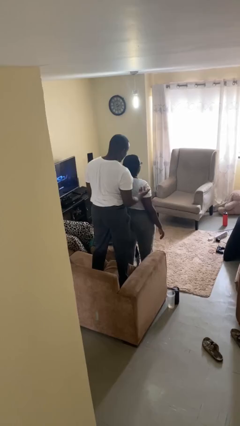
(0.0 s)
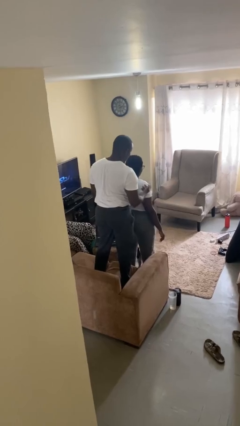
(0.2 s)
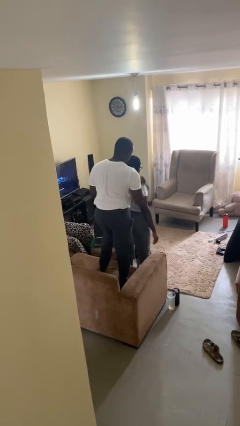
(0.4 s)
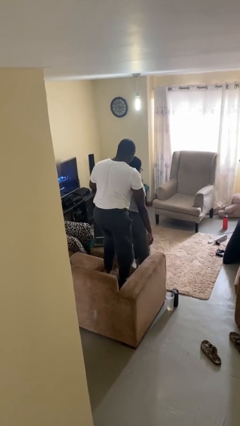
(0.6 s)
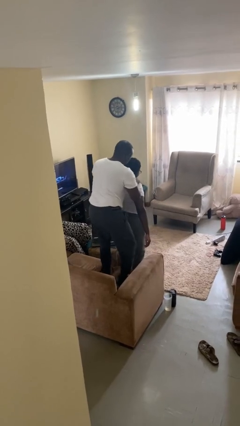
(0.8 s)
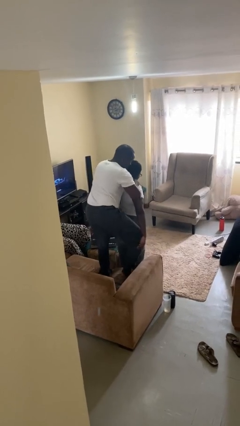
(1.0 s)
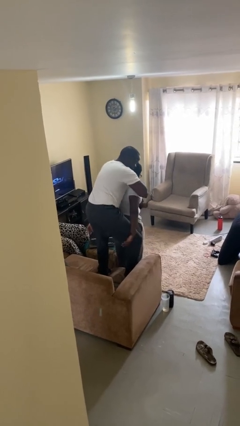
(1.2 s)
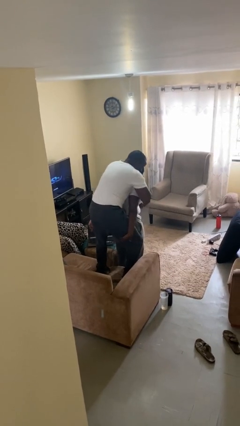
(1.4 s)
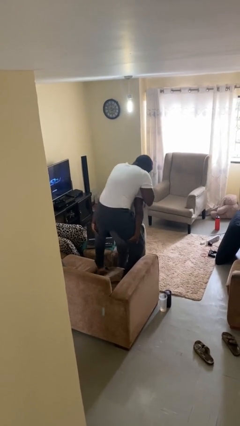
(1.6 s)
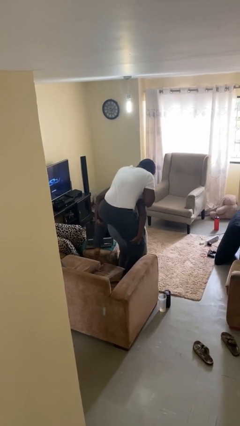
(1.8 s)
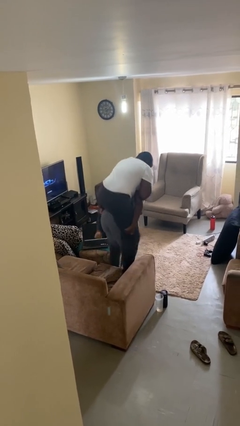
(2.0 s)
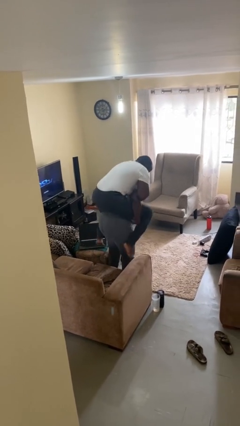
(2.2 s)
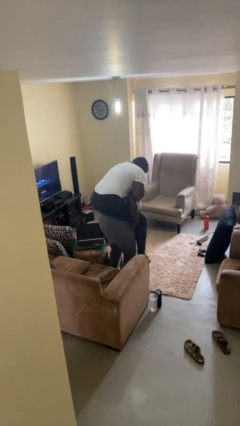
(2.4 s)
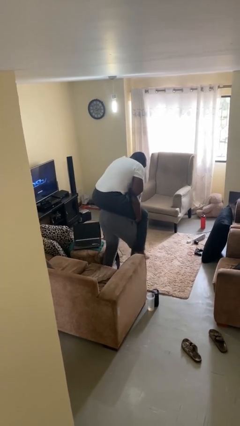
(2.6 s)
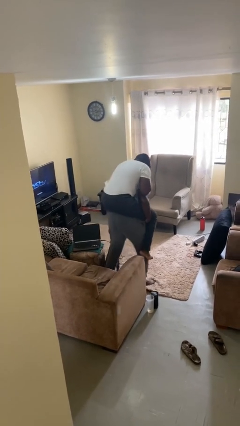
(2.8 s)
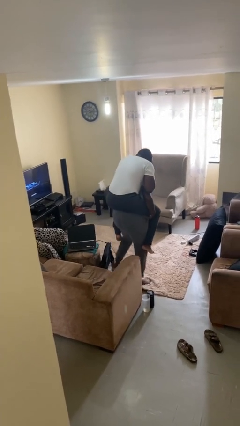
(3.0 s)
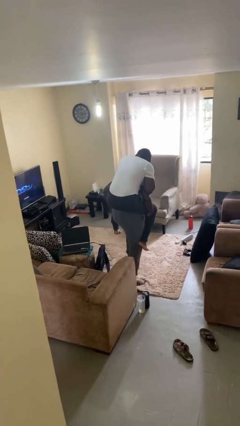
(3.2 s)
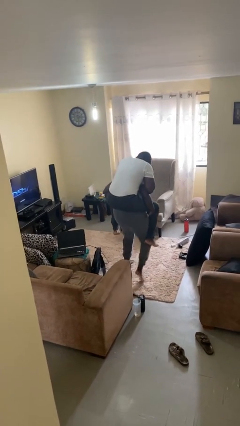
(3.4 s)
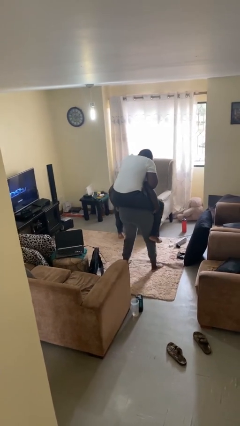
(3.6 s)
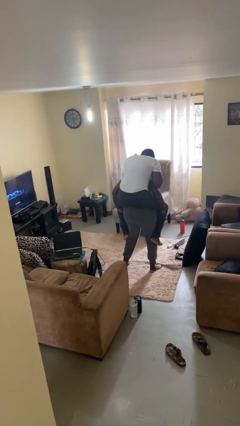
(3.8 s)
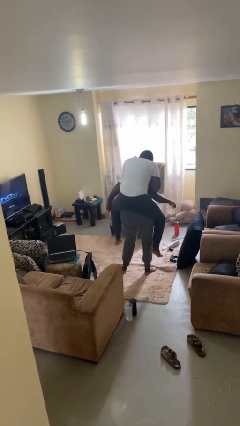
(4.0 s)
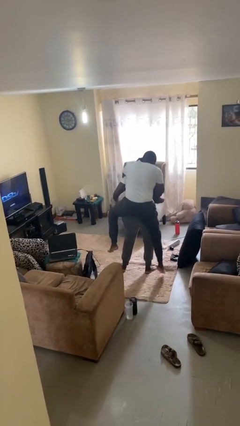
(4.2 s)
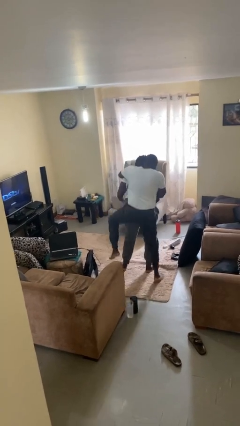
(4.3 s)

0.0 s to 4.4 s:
person carries person on back

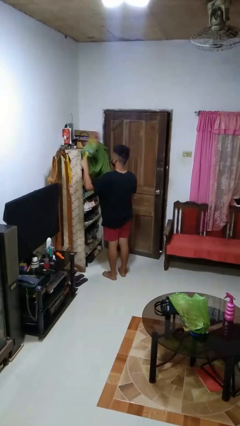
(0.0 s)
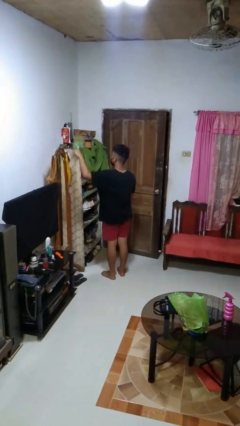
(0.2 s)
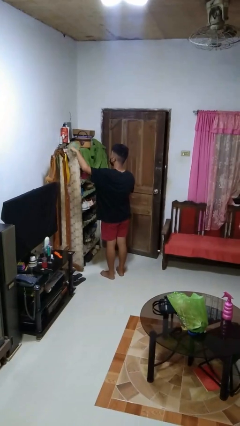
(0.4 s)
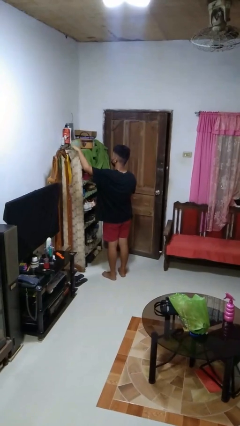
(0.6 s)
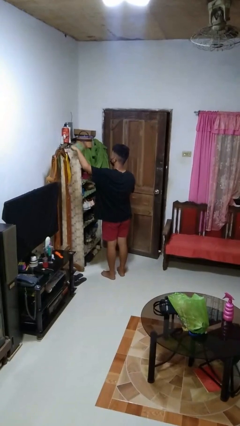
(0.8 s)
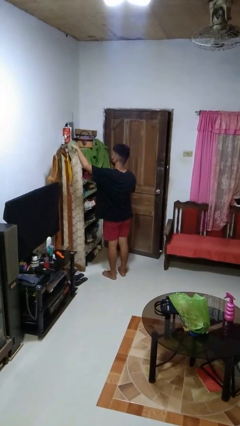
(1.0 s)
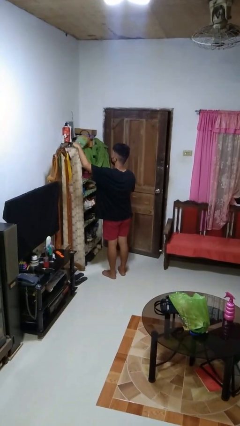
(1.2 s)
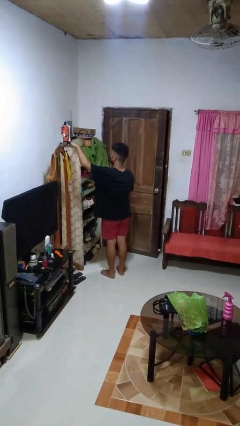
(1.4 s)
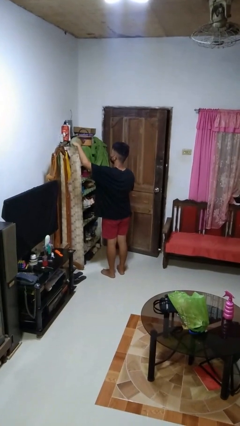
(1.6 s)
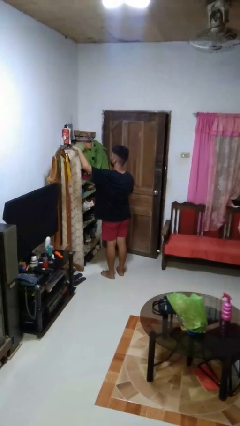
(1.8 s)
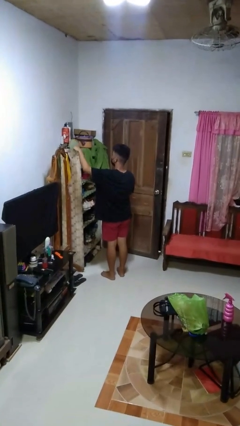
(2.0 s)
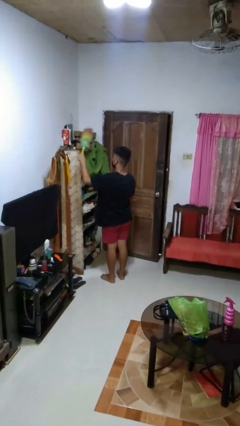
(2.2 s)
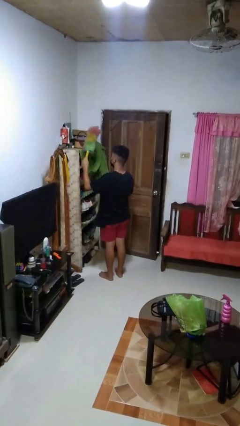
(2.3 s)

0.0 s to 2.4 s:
person dusts furniture

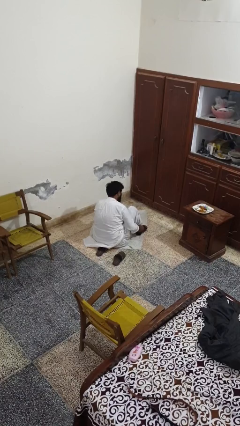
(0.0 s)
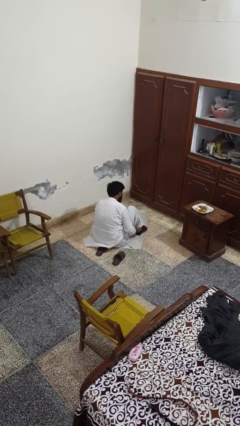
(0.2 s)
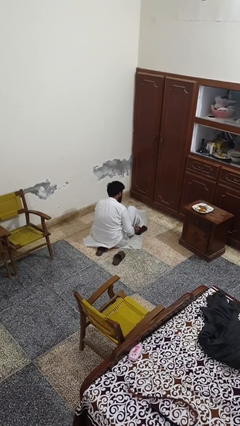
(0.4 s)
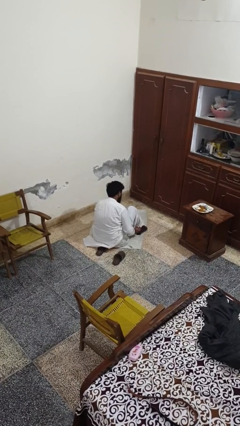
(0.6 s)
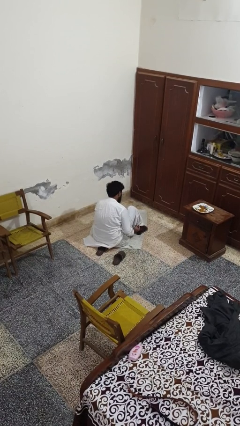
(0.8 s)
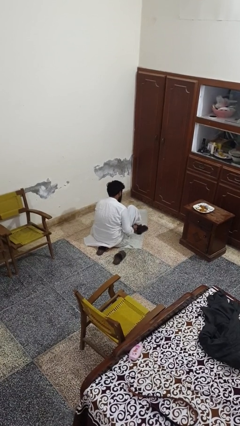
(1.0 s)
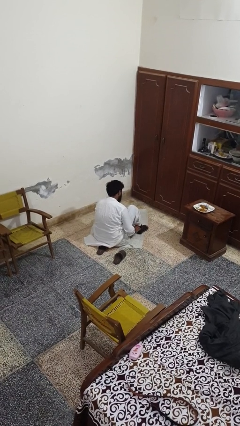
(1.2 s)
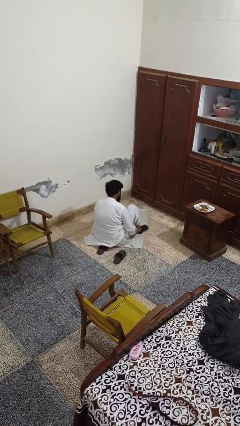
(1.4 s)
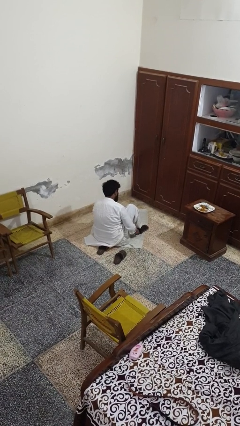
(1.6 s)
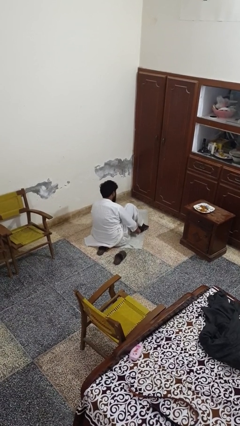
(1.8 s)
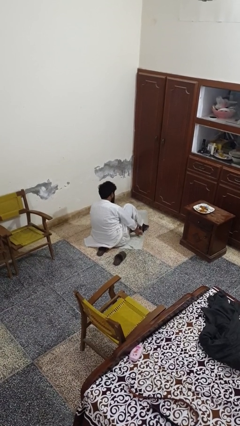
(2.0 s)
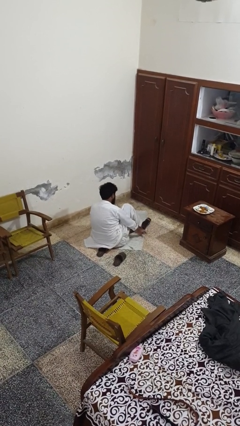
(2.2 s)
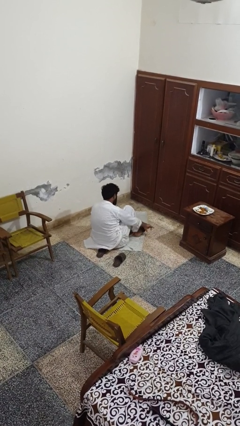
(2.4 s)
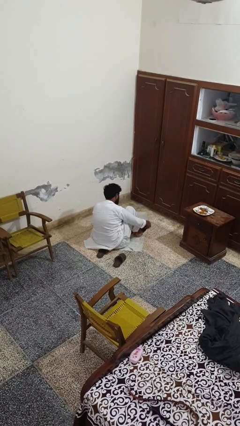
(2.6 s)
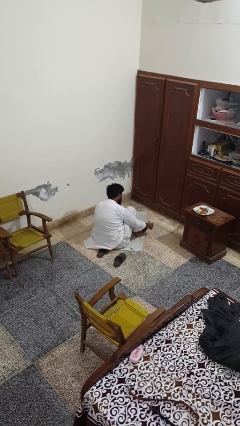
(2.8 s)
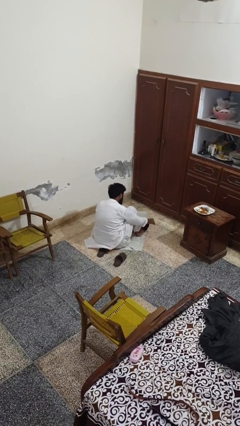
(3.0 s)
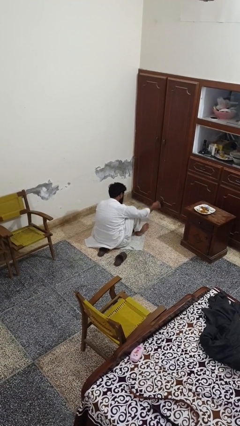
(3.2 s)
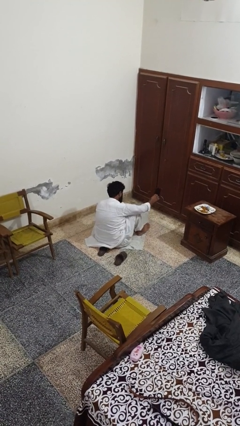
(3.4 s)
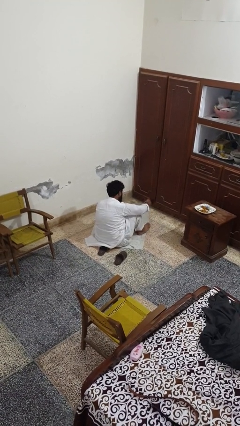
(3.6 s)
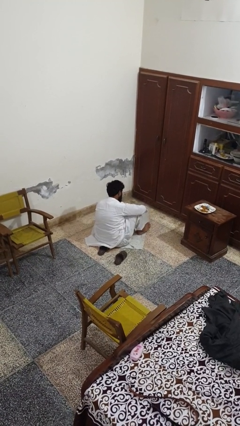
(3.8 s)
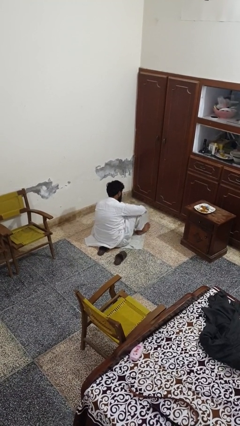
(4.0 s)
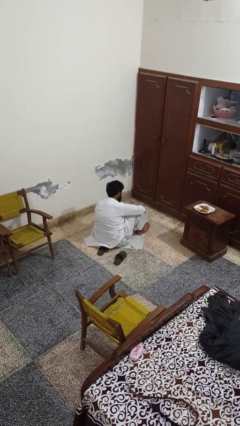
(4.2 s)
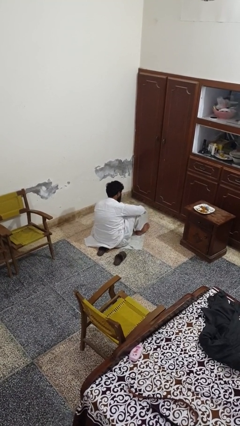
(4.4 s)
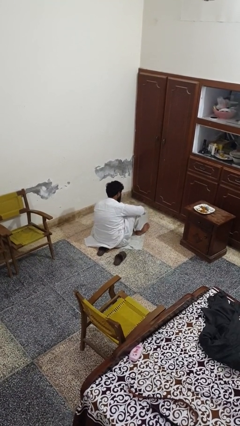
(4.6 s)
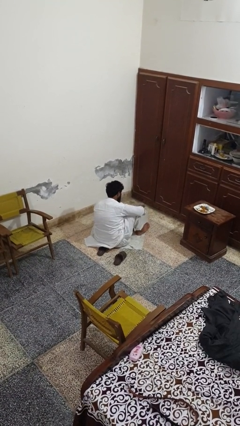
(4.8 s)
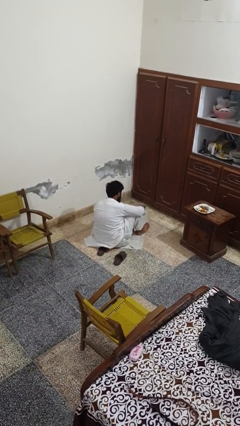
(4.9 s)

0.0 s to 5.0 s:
person takes off socks

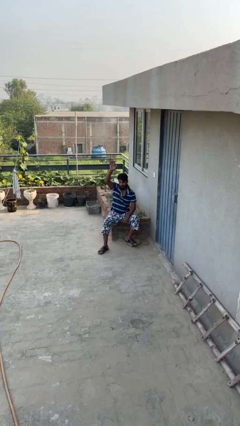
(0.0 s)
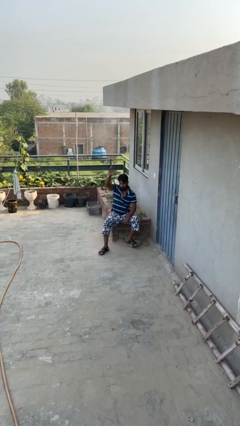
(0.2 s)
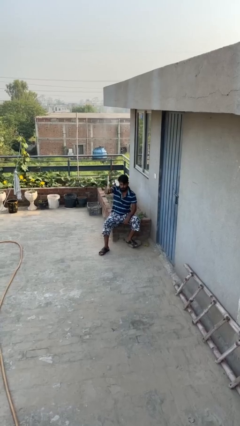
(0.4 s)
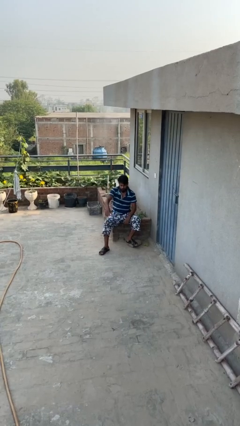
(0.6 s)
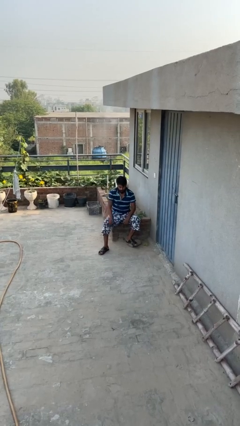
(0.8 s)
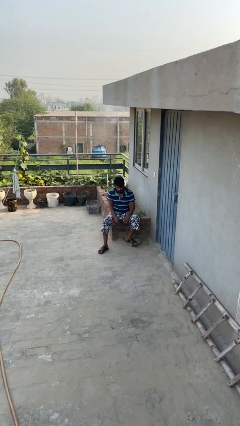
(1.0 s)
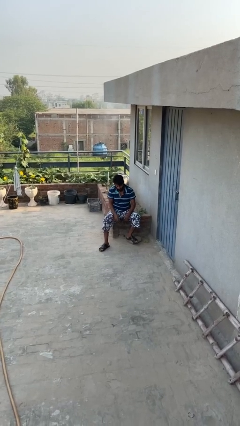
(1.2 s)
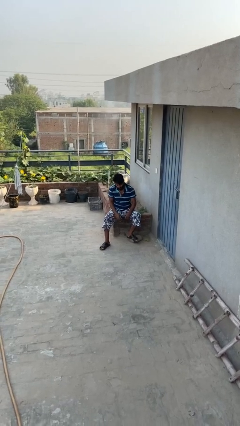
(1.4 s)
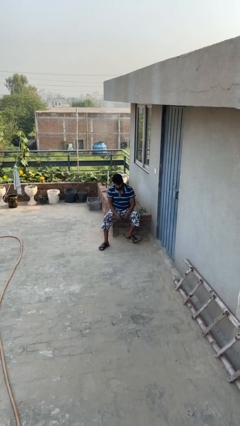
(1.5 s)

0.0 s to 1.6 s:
person gestures lower hand

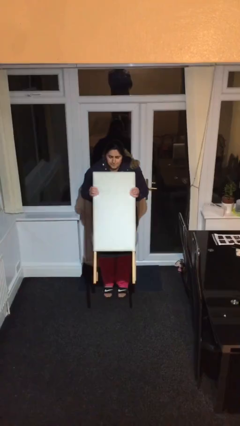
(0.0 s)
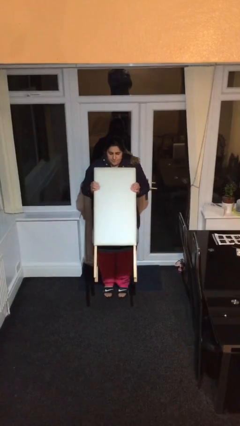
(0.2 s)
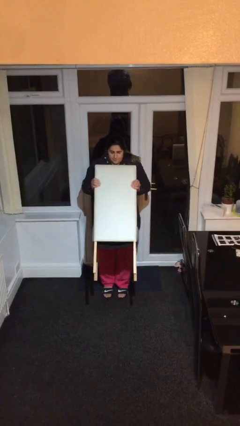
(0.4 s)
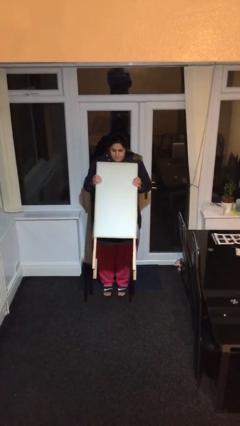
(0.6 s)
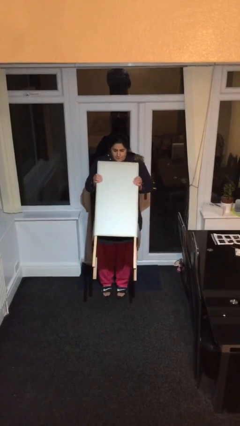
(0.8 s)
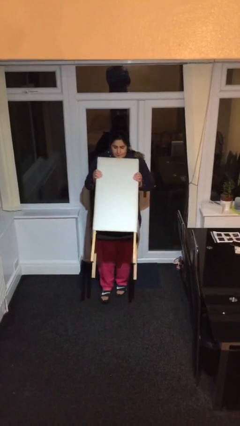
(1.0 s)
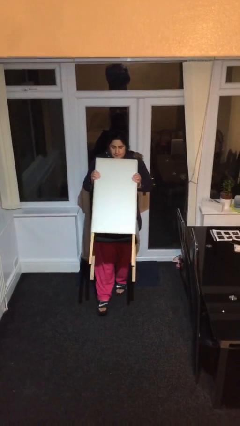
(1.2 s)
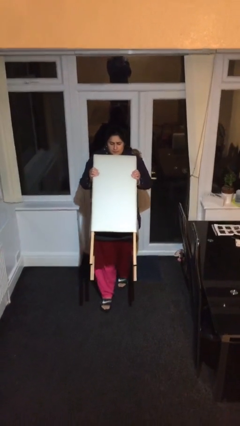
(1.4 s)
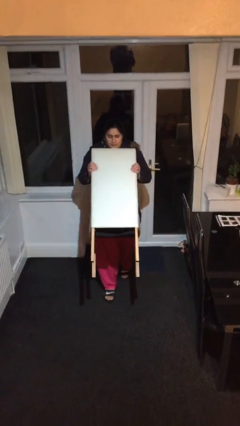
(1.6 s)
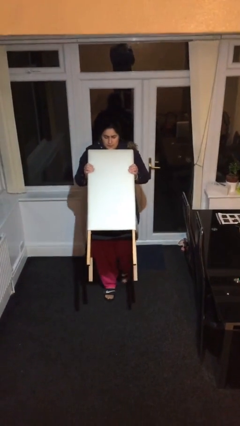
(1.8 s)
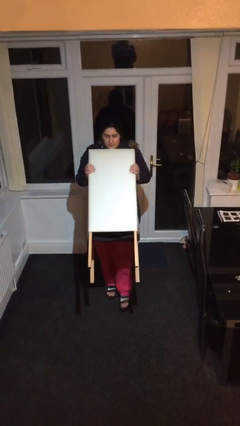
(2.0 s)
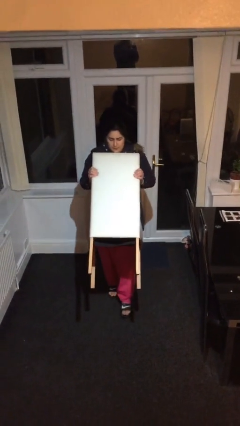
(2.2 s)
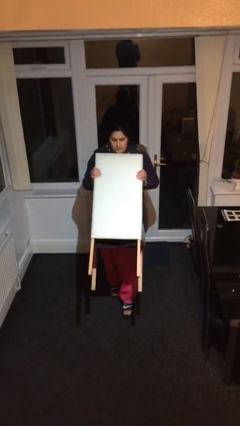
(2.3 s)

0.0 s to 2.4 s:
person carries heavy object

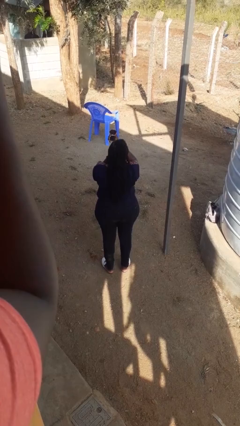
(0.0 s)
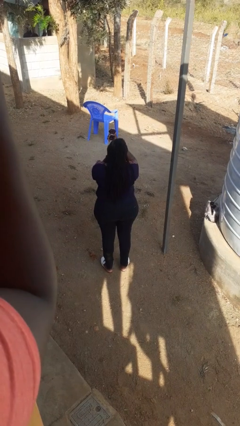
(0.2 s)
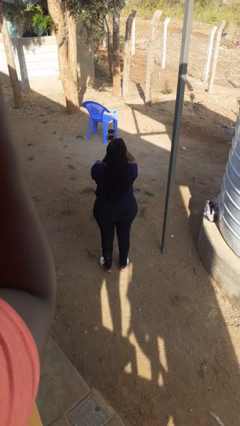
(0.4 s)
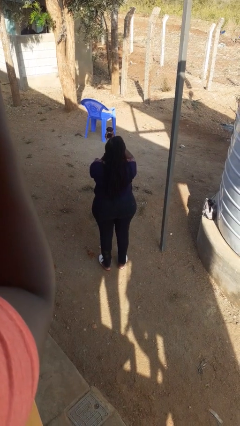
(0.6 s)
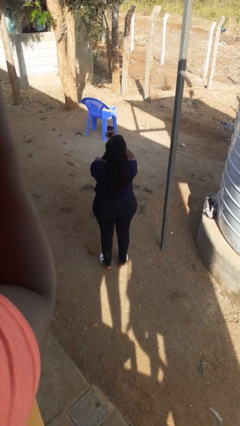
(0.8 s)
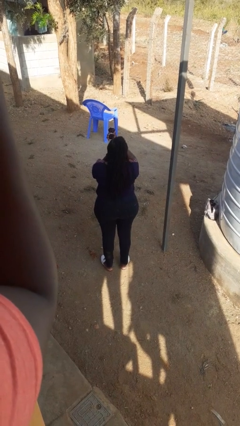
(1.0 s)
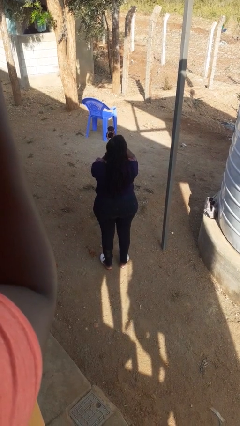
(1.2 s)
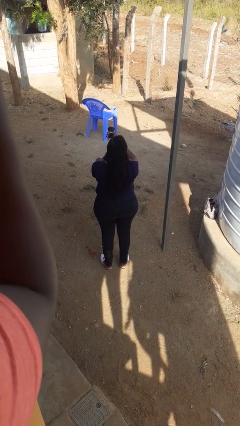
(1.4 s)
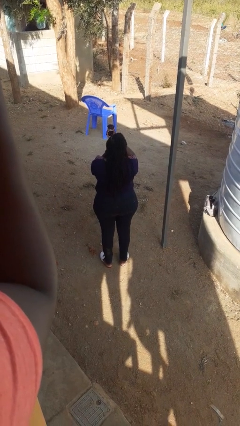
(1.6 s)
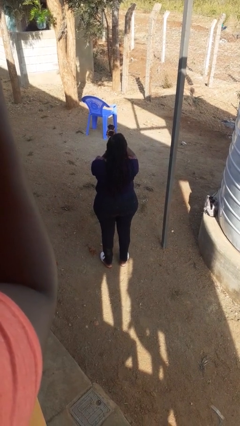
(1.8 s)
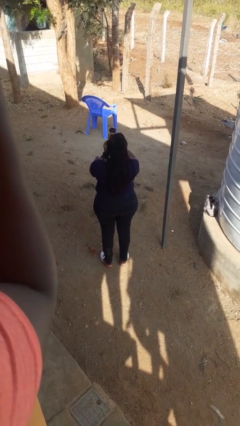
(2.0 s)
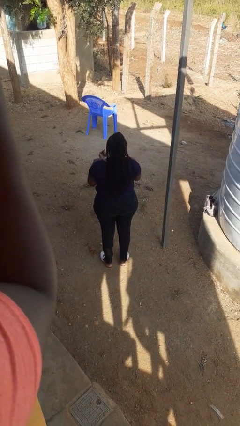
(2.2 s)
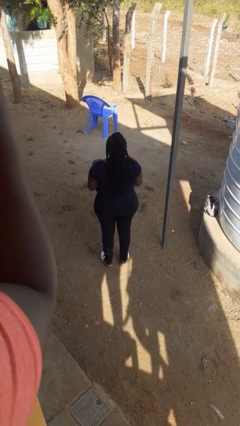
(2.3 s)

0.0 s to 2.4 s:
person applies eye makeup
